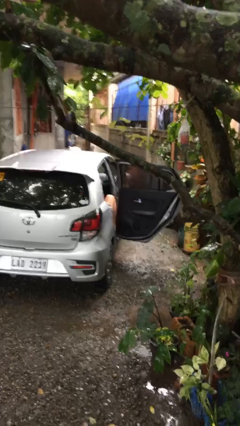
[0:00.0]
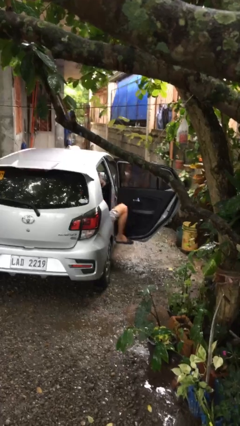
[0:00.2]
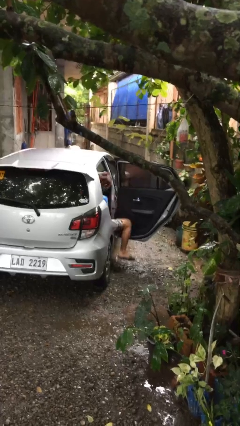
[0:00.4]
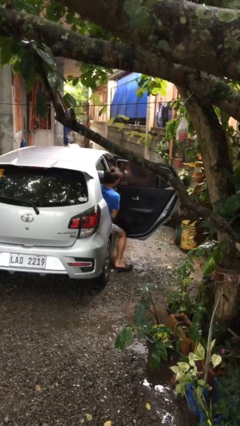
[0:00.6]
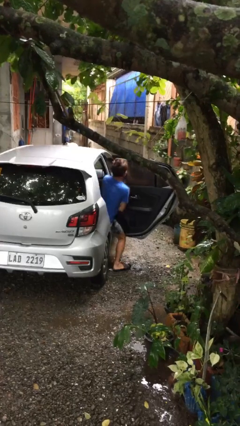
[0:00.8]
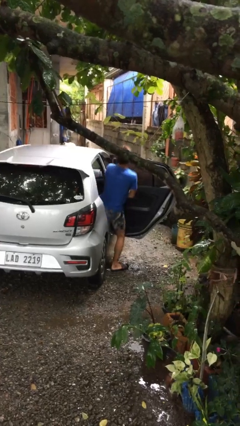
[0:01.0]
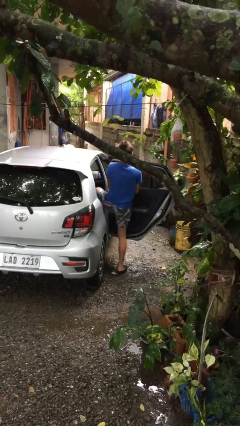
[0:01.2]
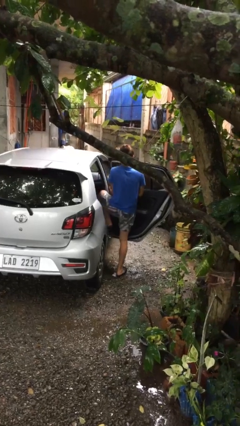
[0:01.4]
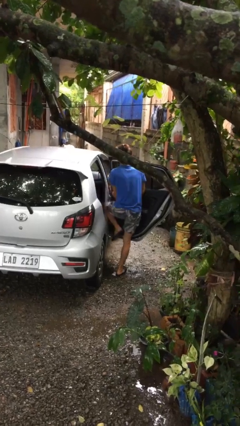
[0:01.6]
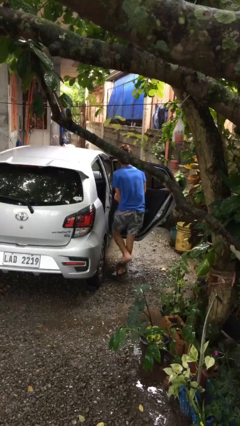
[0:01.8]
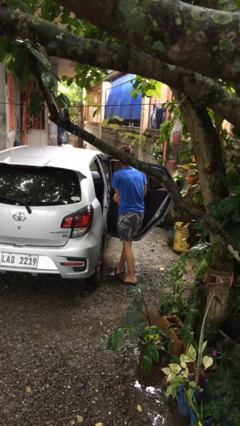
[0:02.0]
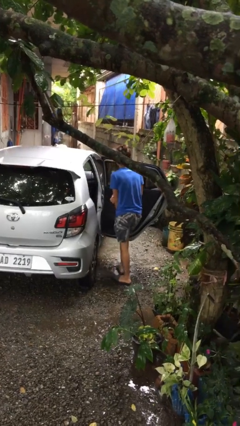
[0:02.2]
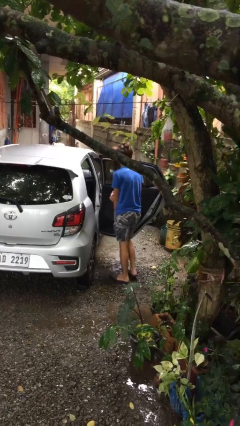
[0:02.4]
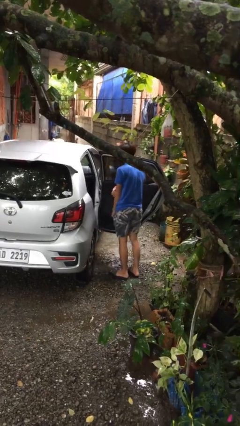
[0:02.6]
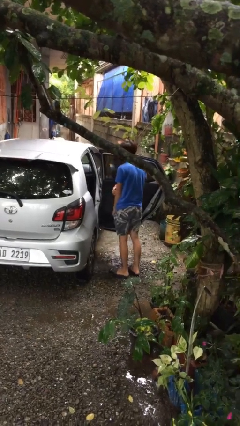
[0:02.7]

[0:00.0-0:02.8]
person exits car

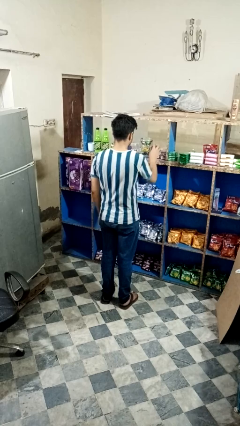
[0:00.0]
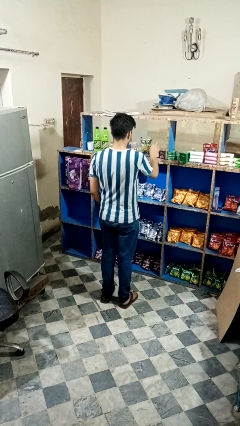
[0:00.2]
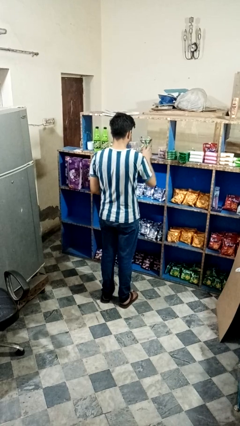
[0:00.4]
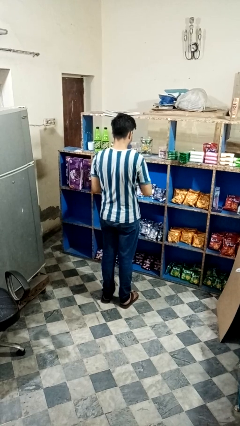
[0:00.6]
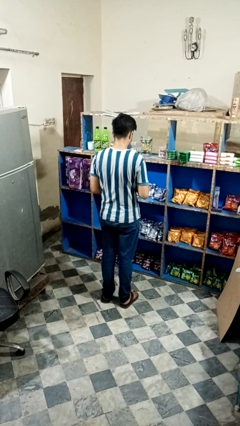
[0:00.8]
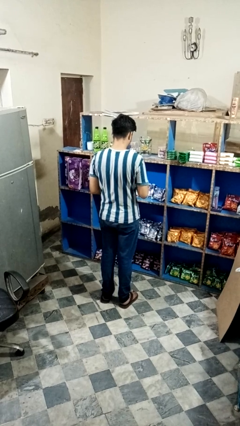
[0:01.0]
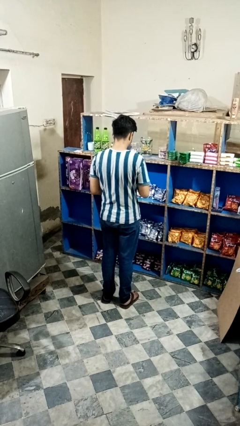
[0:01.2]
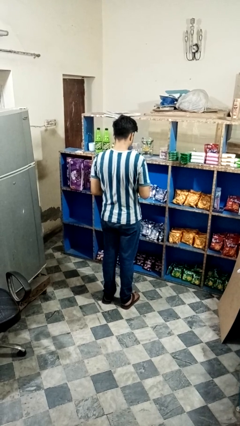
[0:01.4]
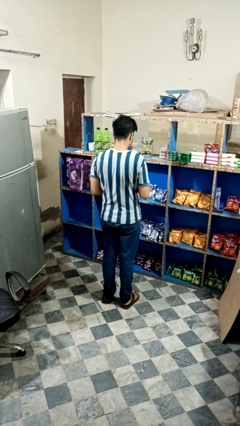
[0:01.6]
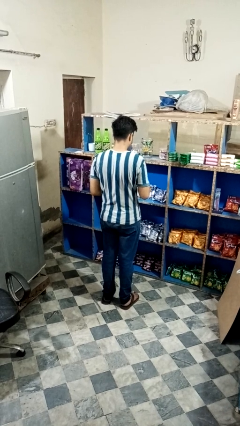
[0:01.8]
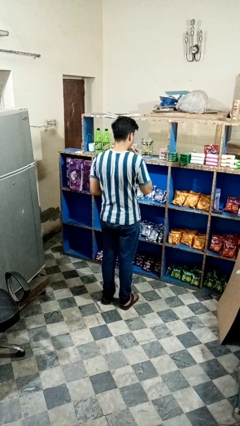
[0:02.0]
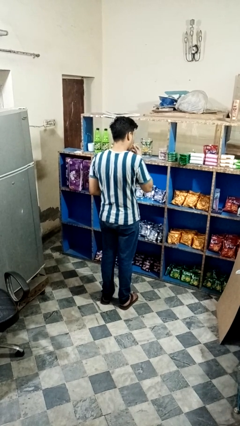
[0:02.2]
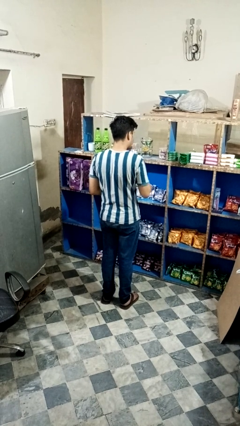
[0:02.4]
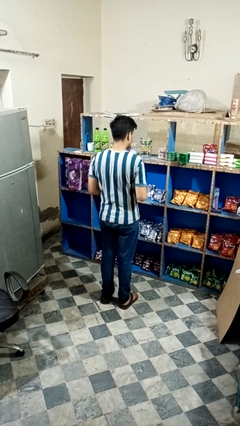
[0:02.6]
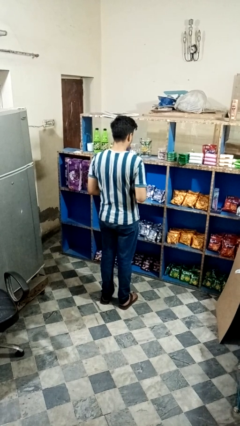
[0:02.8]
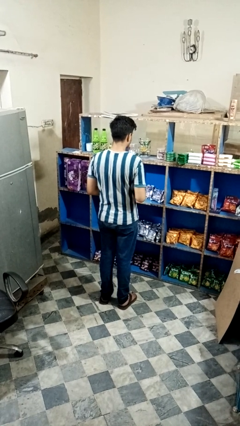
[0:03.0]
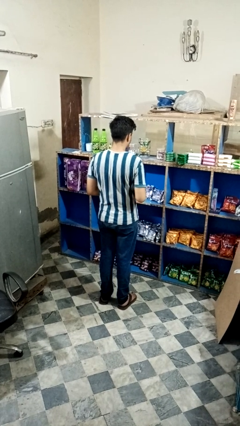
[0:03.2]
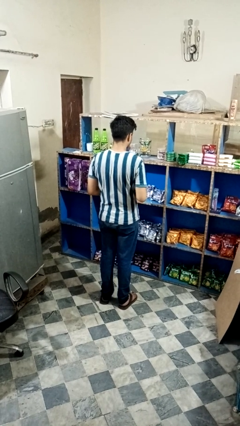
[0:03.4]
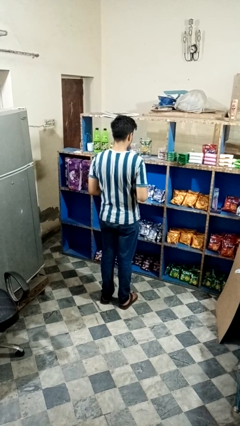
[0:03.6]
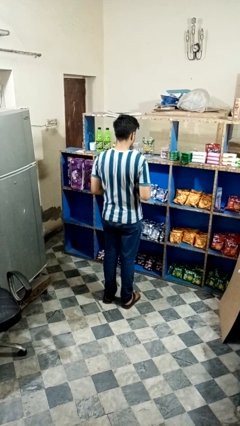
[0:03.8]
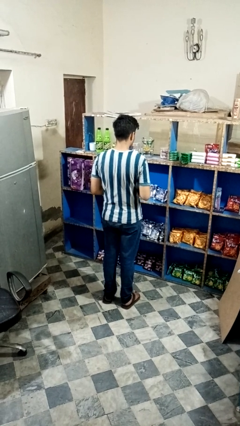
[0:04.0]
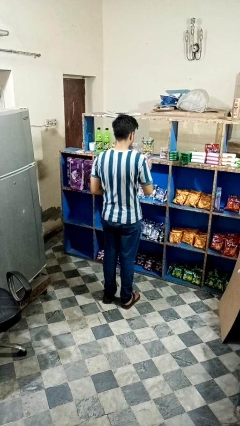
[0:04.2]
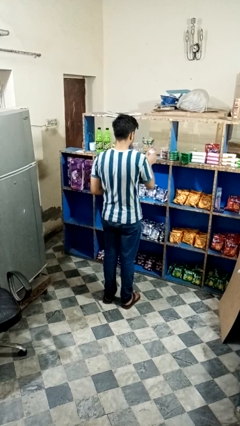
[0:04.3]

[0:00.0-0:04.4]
person eats snack from bag

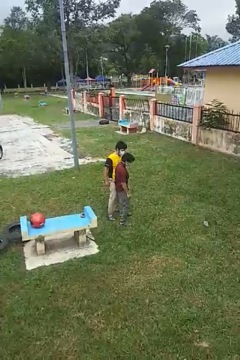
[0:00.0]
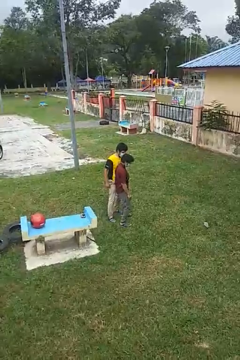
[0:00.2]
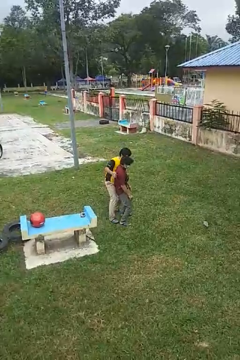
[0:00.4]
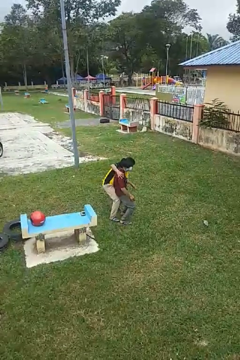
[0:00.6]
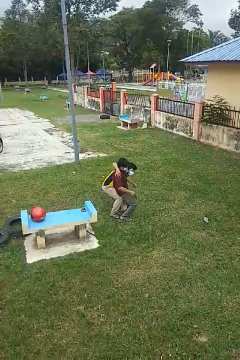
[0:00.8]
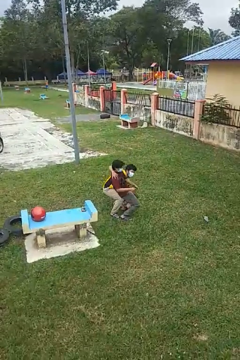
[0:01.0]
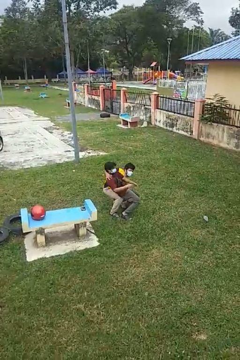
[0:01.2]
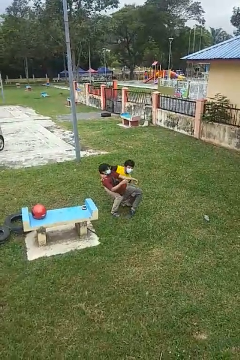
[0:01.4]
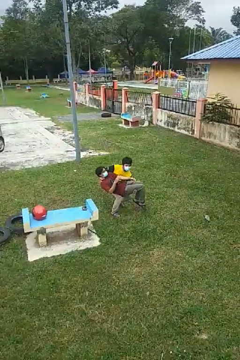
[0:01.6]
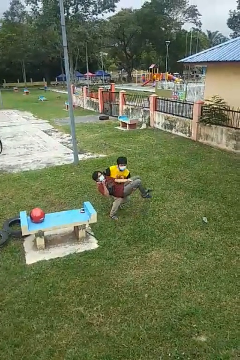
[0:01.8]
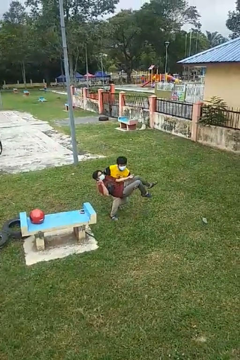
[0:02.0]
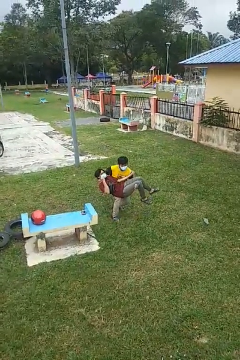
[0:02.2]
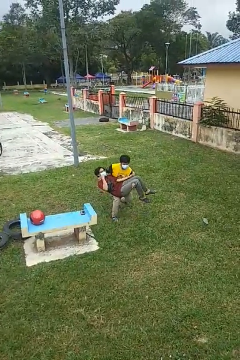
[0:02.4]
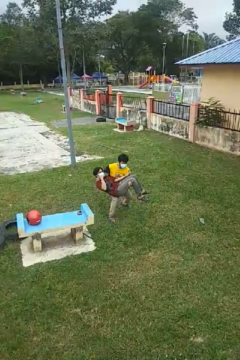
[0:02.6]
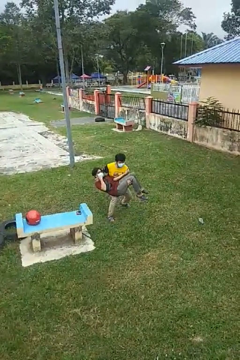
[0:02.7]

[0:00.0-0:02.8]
person picks up person

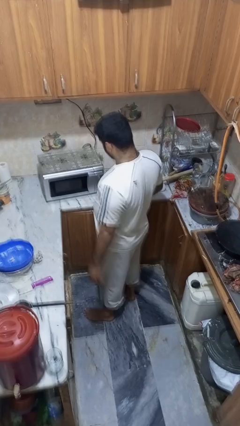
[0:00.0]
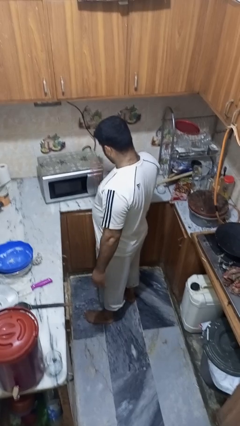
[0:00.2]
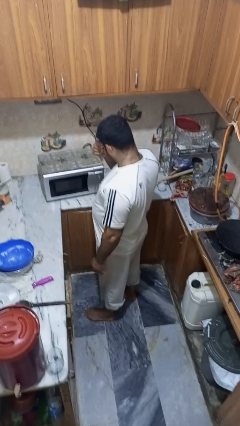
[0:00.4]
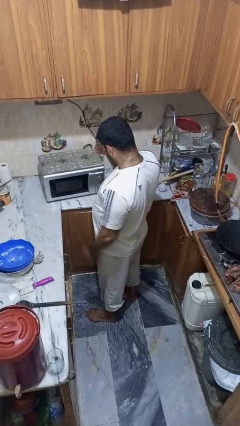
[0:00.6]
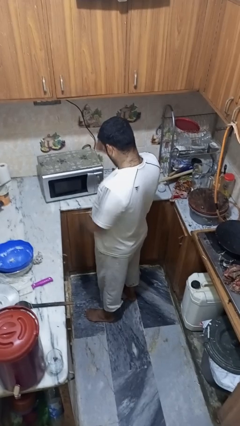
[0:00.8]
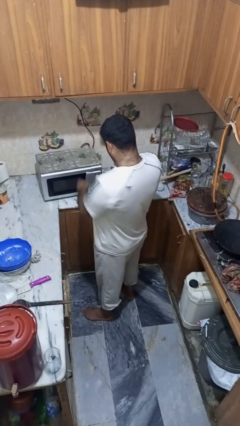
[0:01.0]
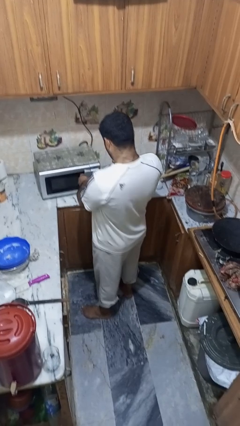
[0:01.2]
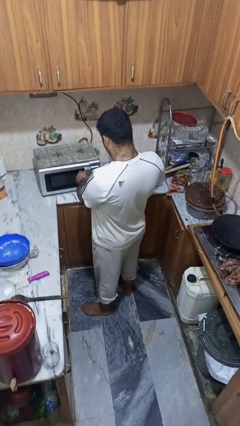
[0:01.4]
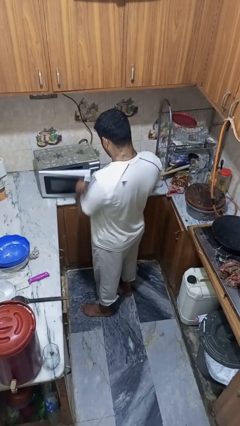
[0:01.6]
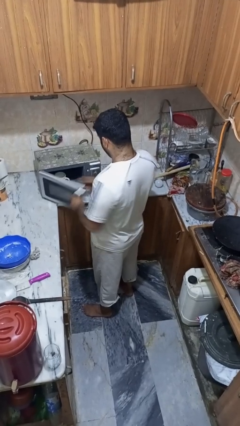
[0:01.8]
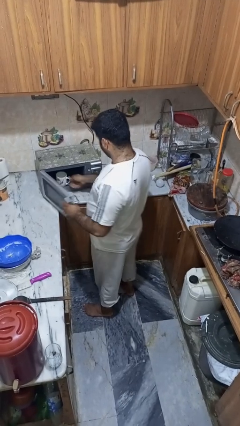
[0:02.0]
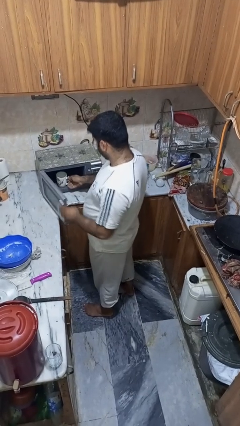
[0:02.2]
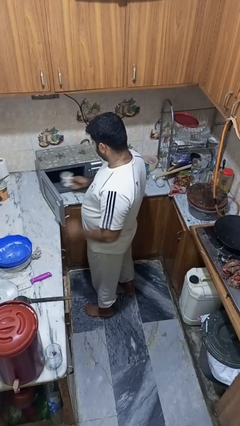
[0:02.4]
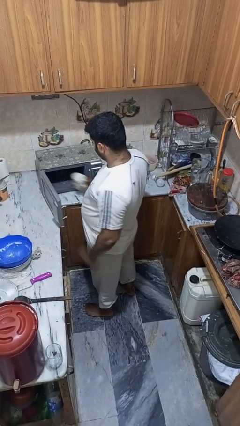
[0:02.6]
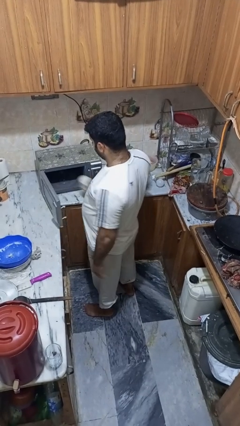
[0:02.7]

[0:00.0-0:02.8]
person takes object from microwave

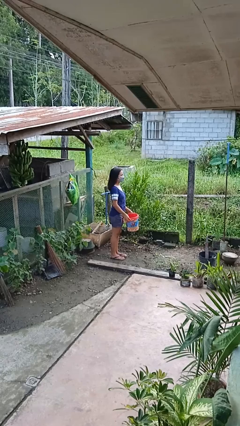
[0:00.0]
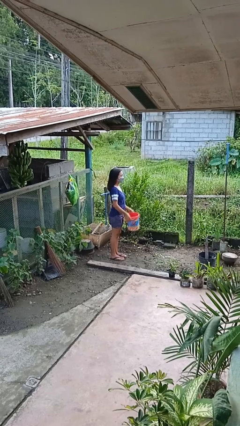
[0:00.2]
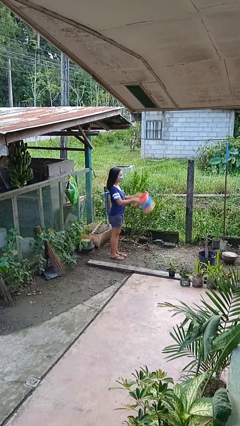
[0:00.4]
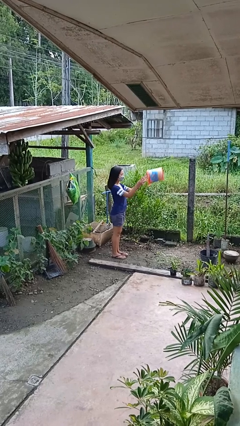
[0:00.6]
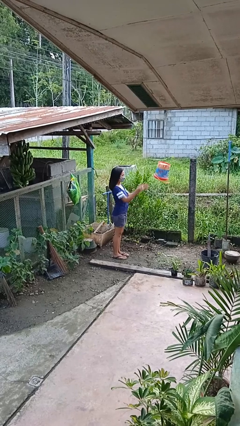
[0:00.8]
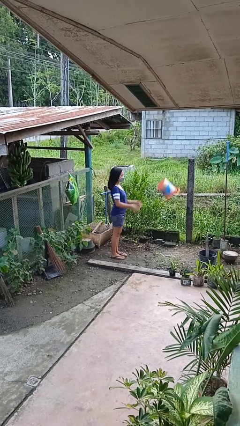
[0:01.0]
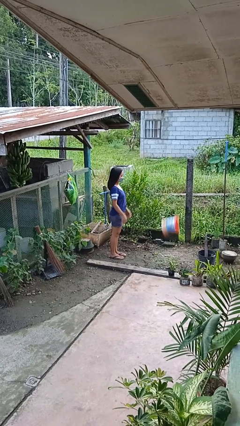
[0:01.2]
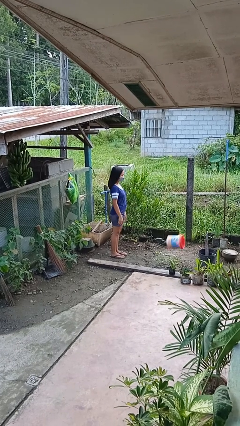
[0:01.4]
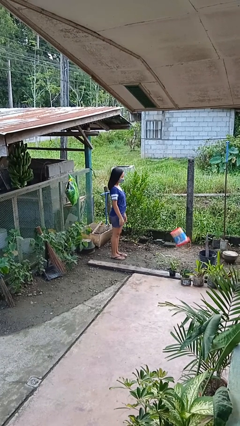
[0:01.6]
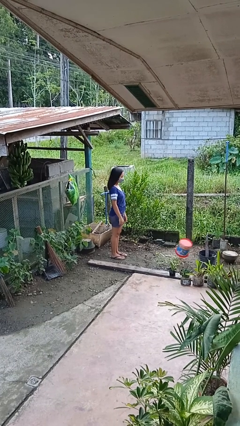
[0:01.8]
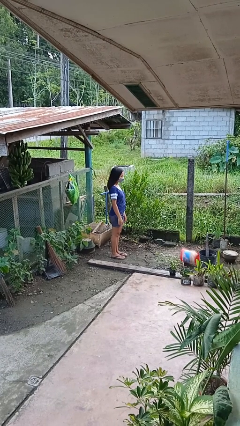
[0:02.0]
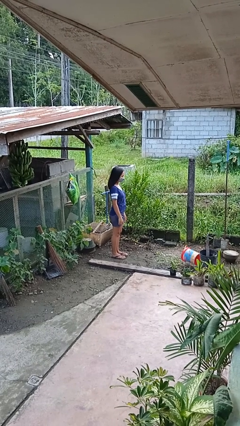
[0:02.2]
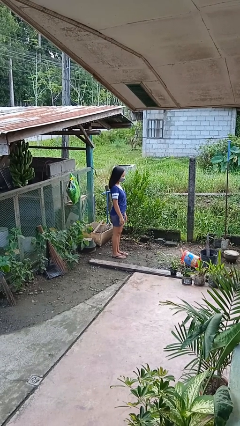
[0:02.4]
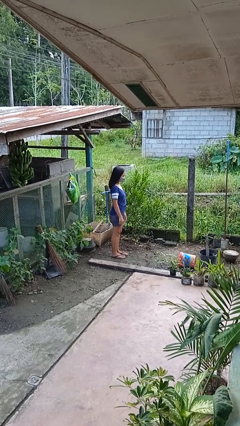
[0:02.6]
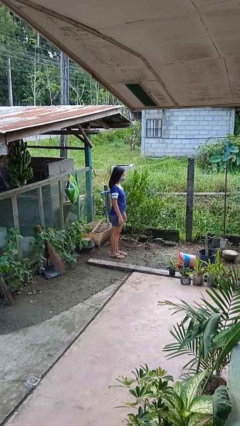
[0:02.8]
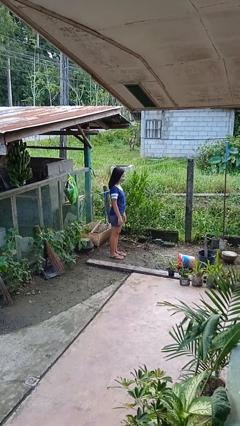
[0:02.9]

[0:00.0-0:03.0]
person throws object into air

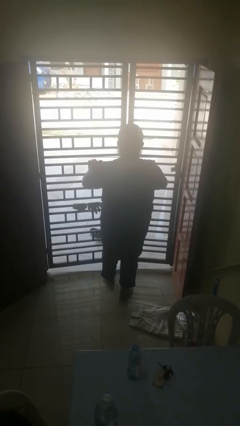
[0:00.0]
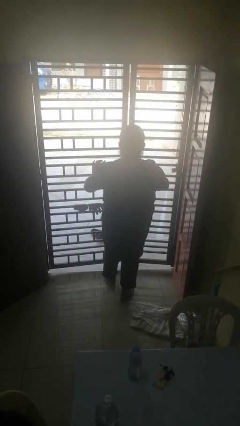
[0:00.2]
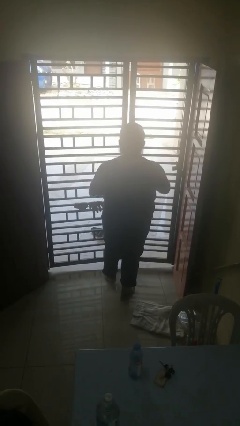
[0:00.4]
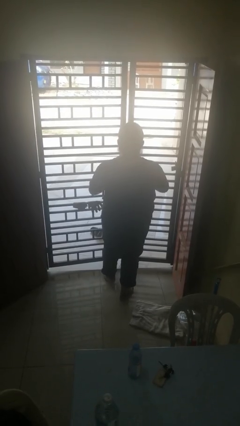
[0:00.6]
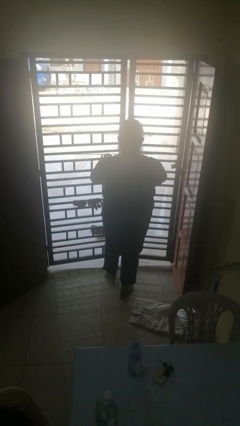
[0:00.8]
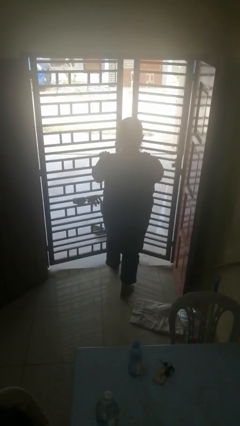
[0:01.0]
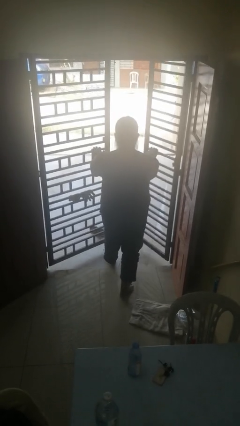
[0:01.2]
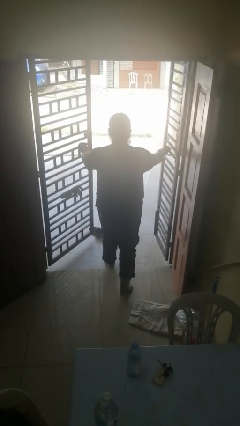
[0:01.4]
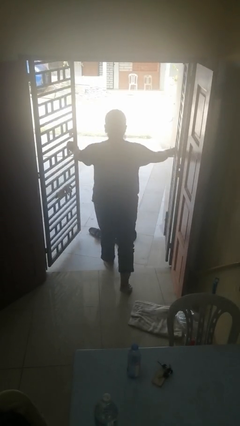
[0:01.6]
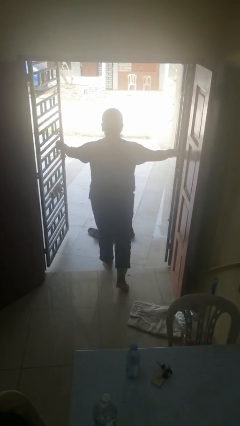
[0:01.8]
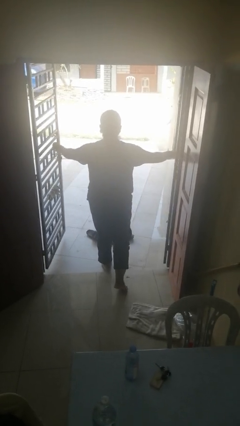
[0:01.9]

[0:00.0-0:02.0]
person opens gate

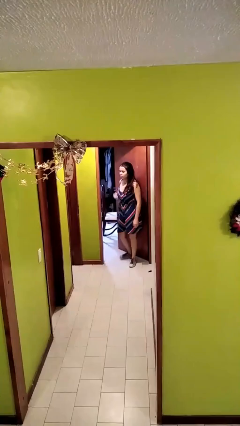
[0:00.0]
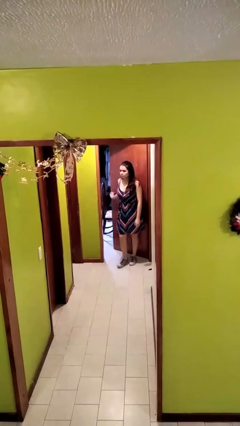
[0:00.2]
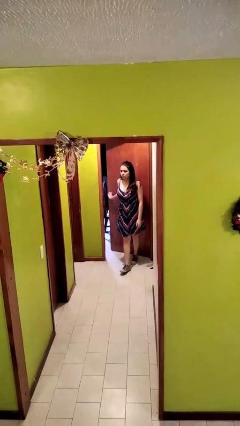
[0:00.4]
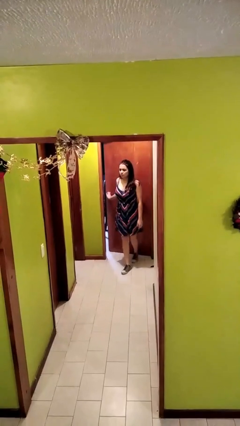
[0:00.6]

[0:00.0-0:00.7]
person closes facility door
